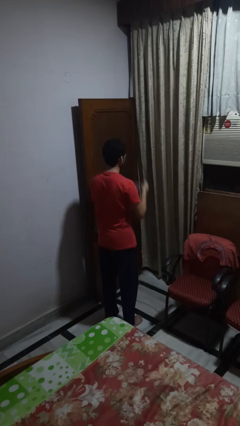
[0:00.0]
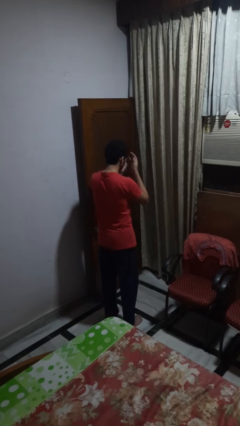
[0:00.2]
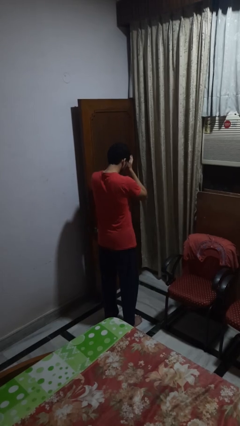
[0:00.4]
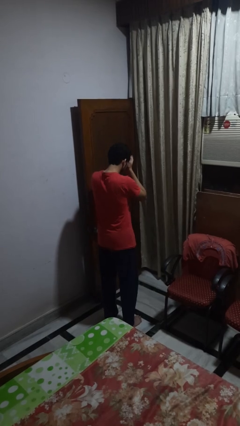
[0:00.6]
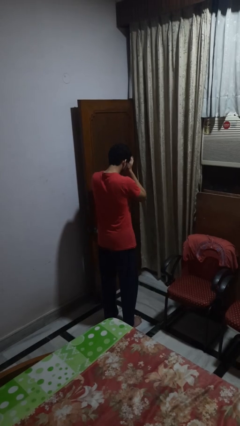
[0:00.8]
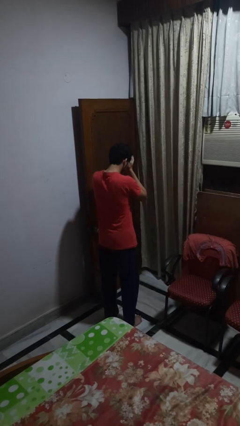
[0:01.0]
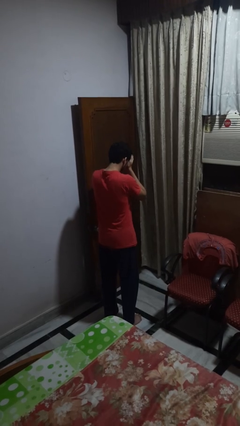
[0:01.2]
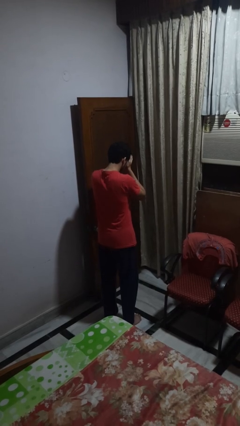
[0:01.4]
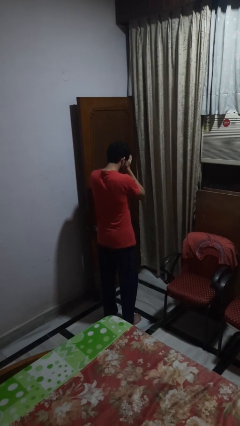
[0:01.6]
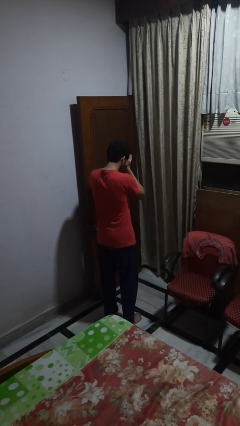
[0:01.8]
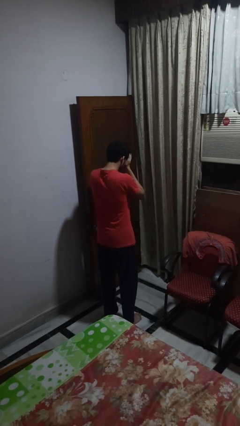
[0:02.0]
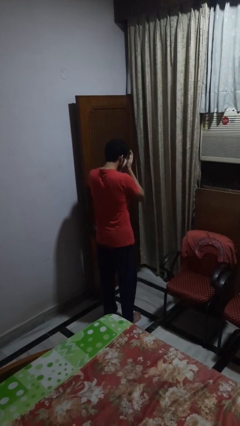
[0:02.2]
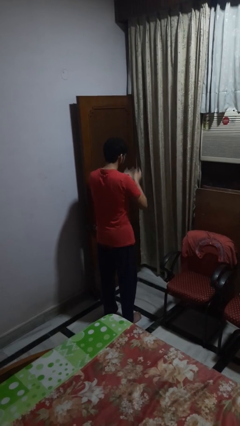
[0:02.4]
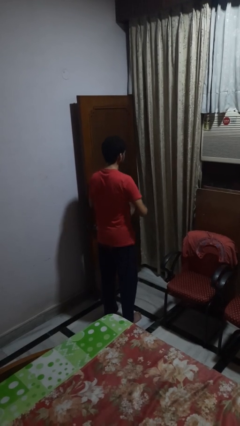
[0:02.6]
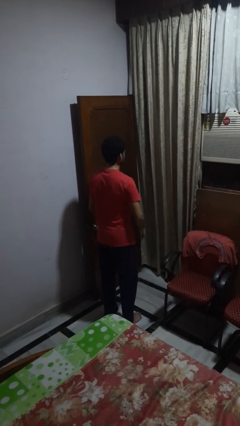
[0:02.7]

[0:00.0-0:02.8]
person covers face with hands

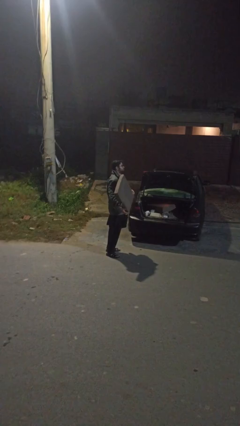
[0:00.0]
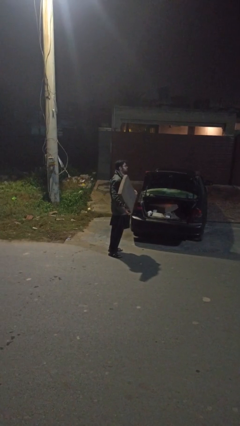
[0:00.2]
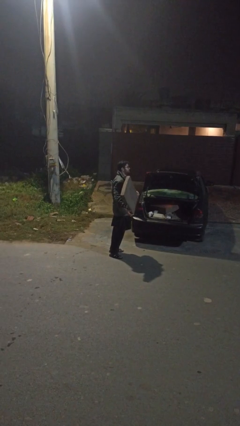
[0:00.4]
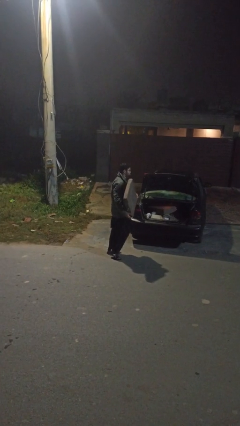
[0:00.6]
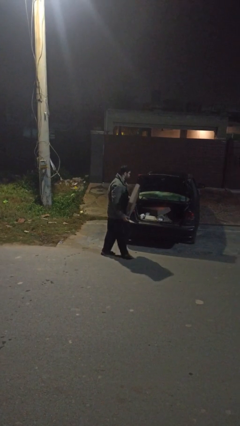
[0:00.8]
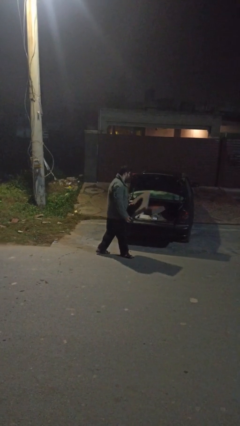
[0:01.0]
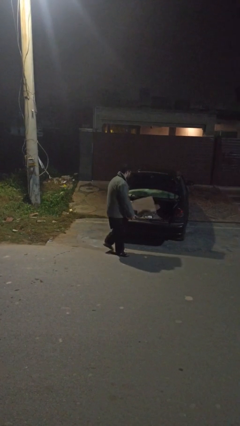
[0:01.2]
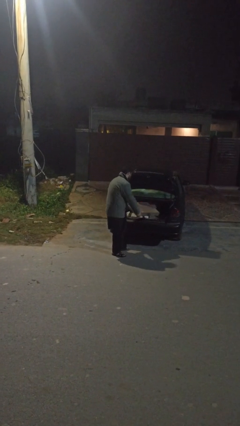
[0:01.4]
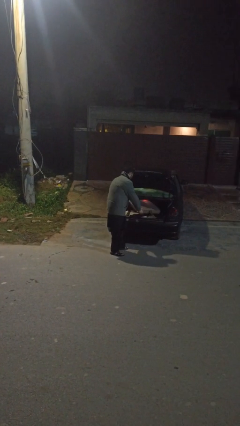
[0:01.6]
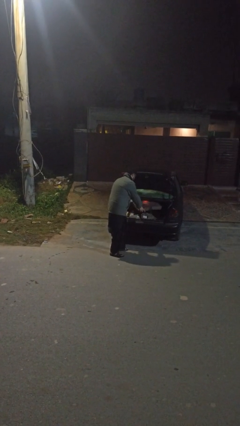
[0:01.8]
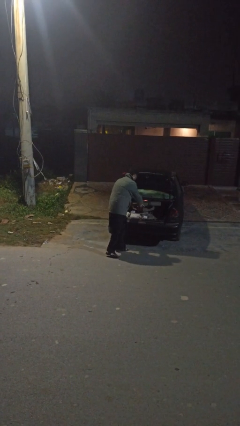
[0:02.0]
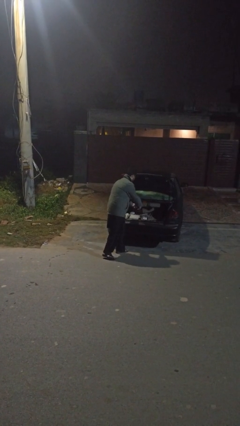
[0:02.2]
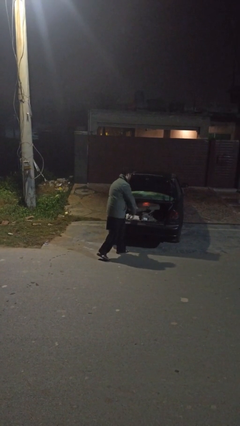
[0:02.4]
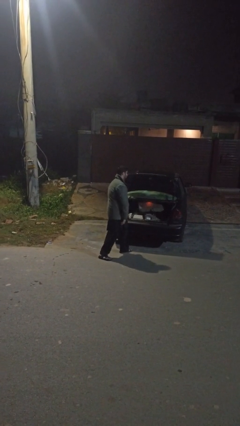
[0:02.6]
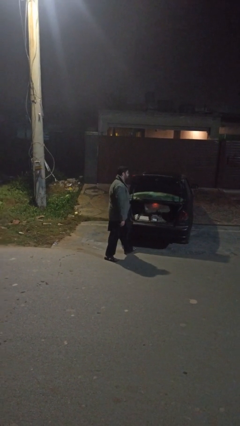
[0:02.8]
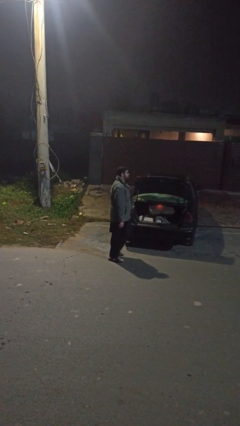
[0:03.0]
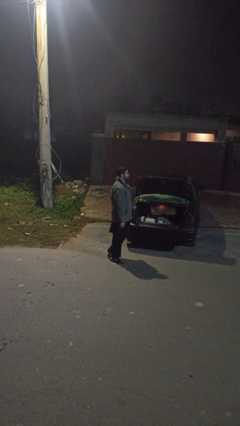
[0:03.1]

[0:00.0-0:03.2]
person loads car

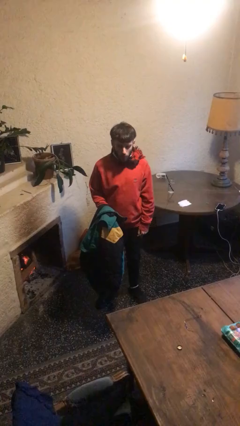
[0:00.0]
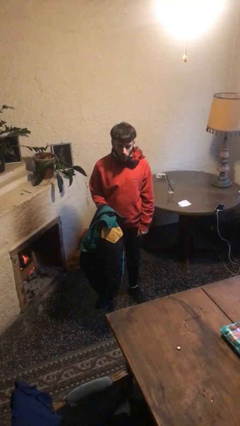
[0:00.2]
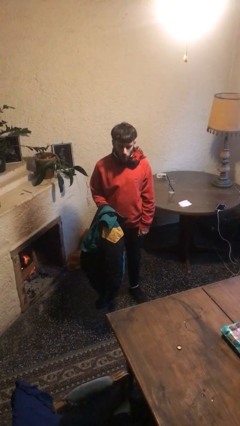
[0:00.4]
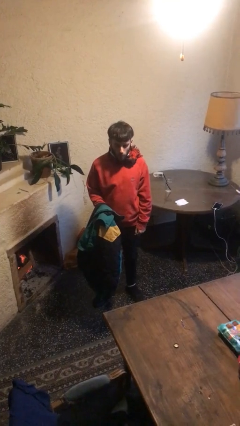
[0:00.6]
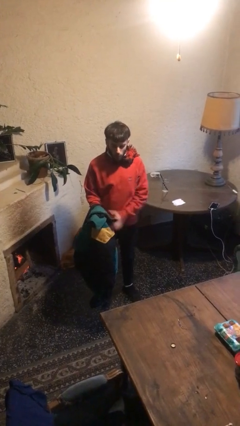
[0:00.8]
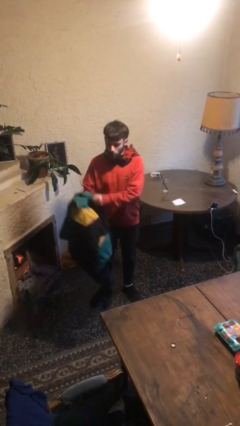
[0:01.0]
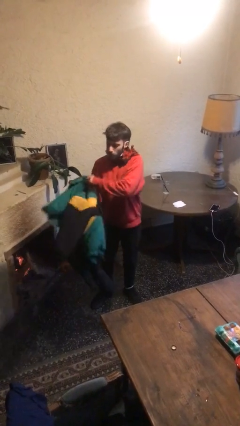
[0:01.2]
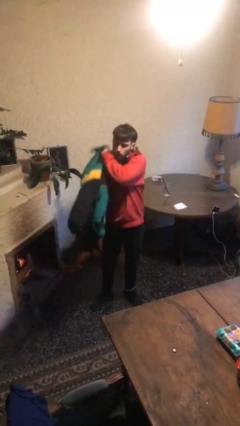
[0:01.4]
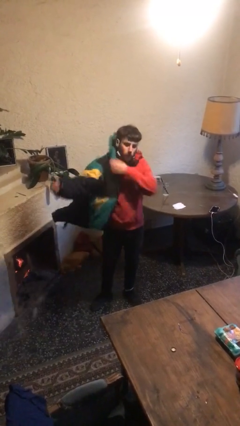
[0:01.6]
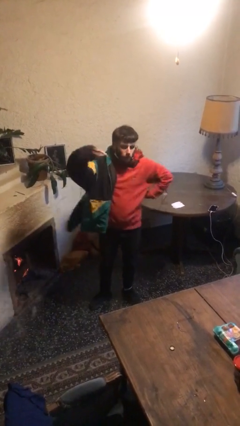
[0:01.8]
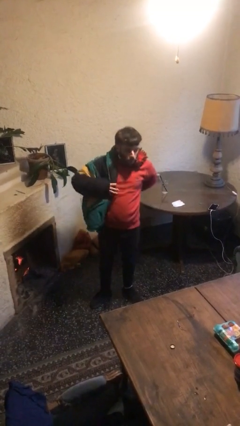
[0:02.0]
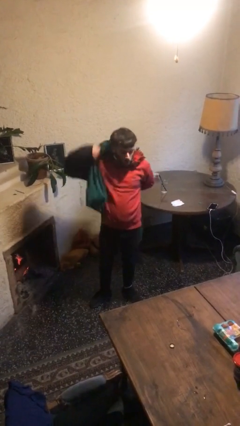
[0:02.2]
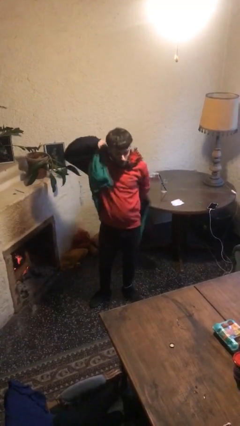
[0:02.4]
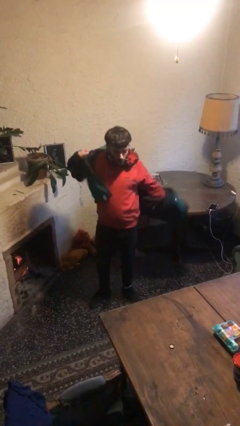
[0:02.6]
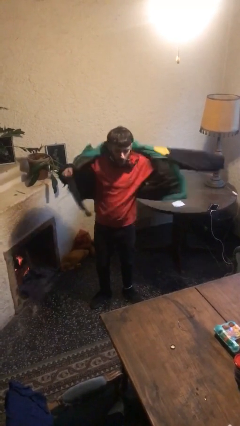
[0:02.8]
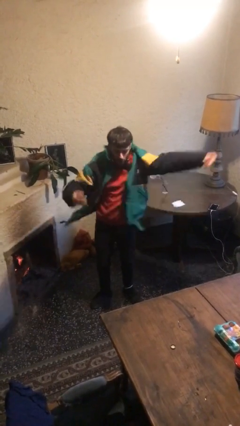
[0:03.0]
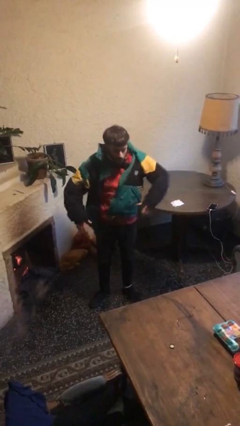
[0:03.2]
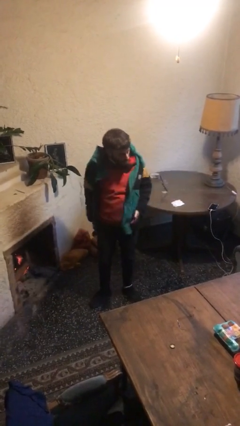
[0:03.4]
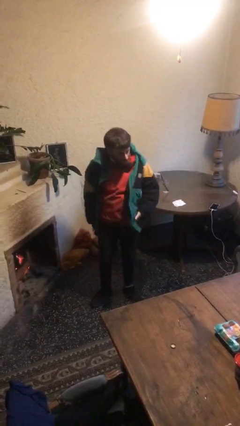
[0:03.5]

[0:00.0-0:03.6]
person puts on jacket

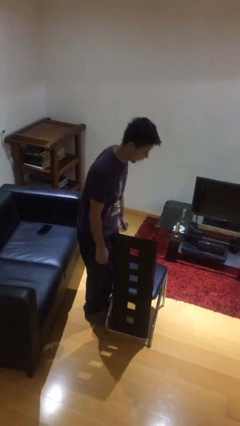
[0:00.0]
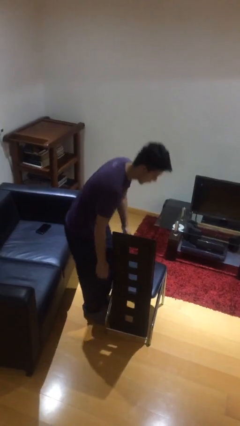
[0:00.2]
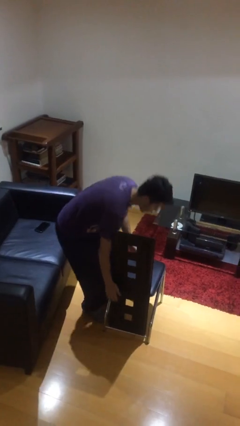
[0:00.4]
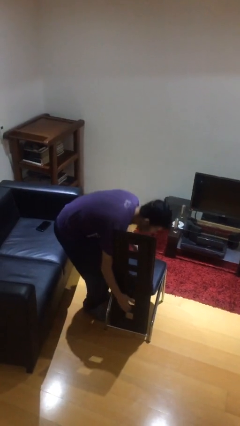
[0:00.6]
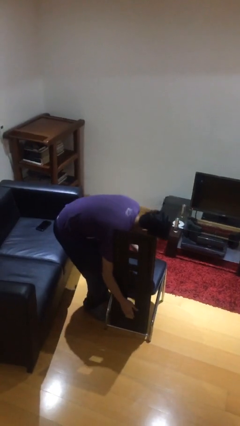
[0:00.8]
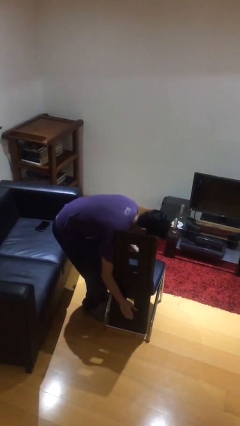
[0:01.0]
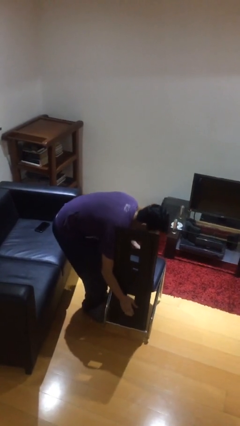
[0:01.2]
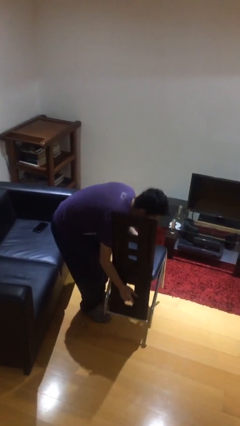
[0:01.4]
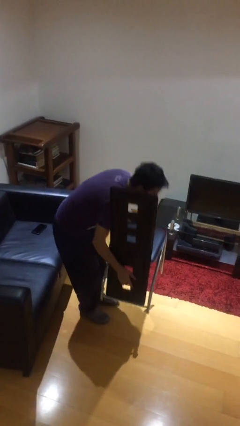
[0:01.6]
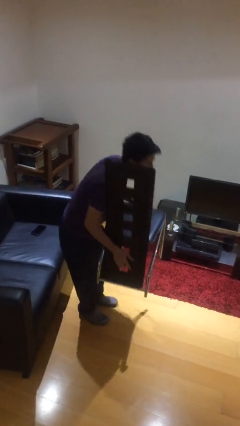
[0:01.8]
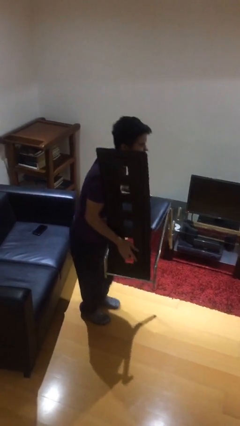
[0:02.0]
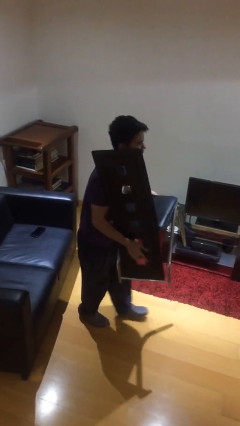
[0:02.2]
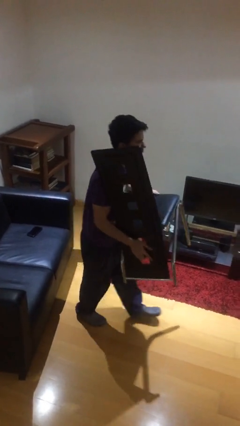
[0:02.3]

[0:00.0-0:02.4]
person picks up object from floor

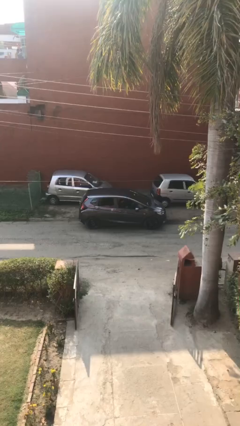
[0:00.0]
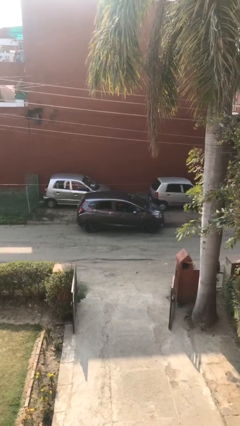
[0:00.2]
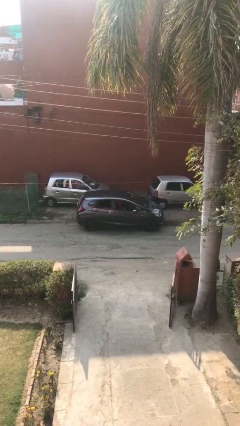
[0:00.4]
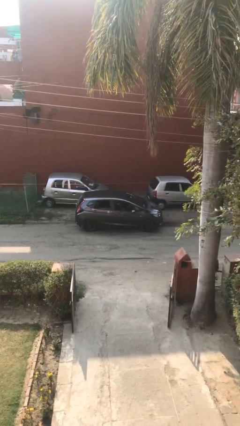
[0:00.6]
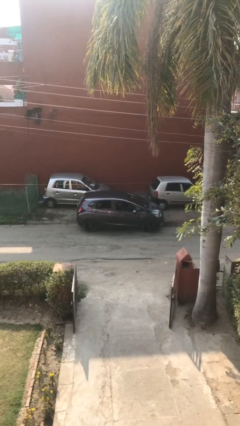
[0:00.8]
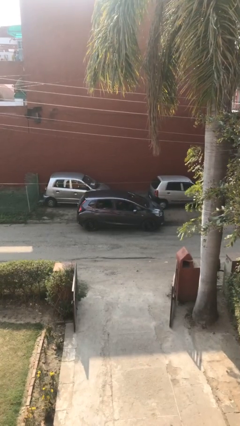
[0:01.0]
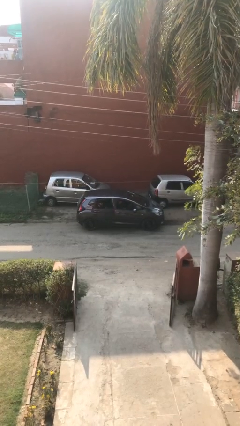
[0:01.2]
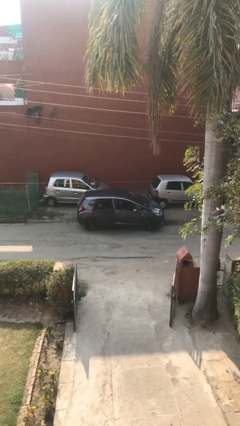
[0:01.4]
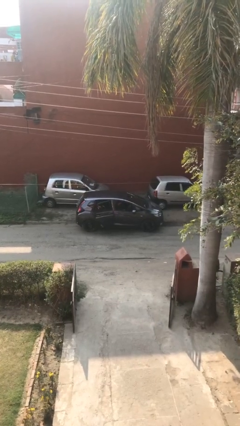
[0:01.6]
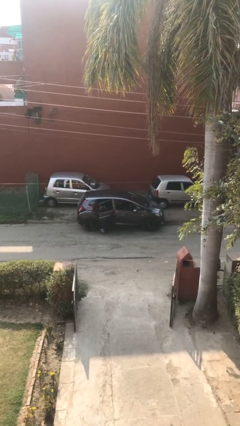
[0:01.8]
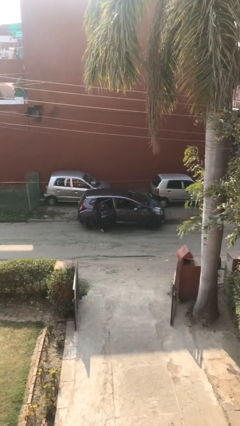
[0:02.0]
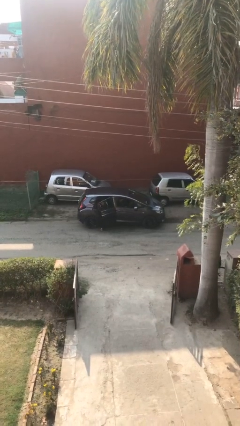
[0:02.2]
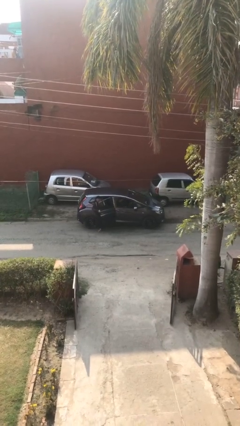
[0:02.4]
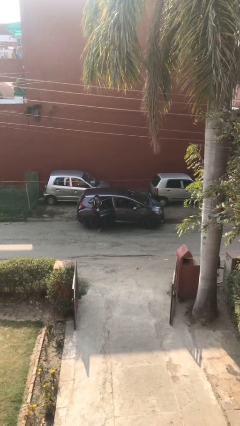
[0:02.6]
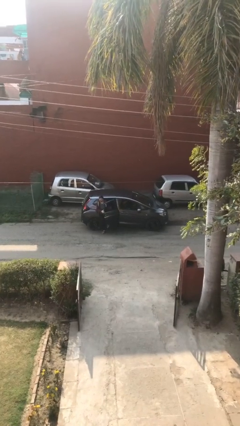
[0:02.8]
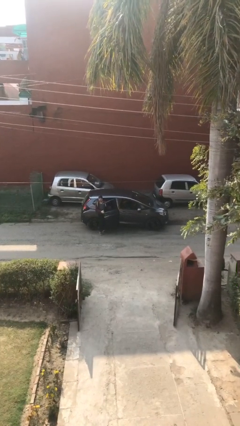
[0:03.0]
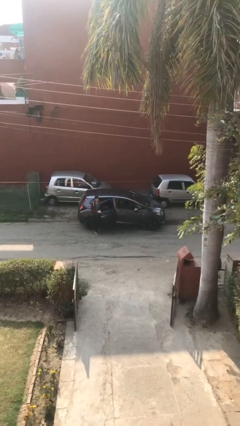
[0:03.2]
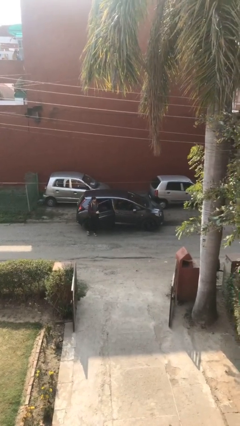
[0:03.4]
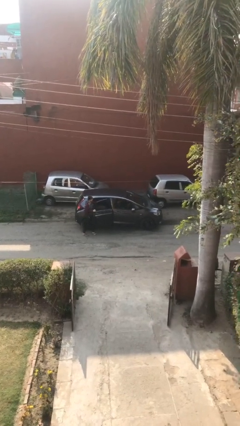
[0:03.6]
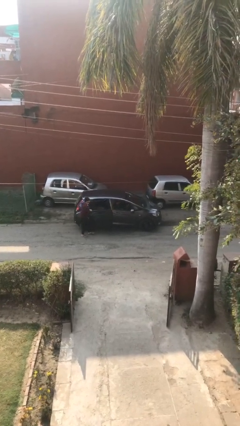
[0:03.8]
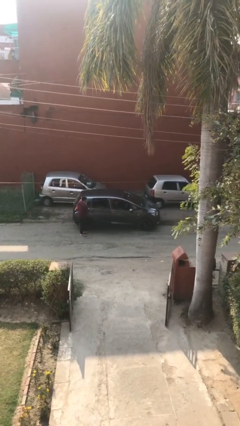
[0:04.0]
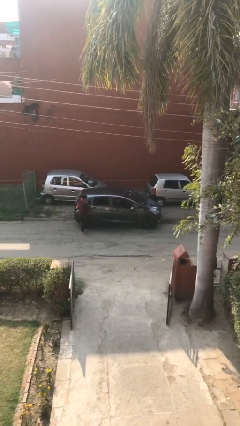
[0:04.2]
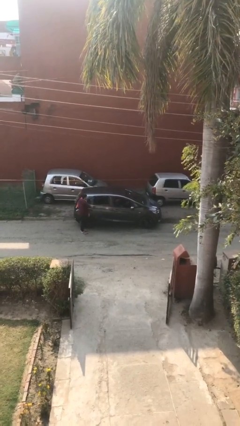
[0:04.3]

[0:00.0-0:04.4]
car drops off person

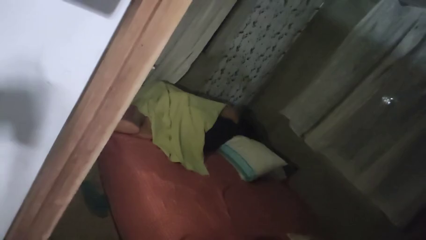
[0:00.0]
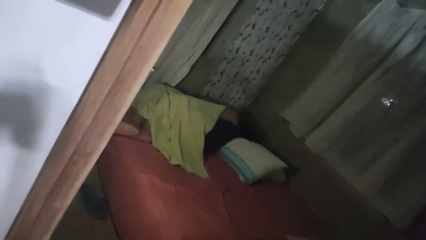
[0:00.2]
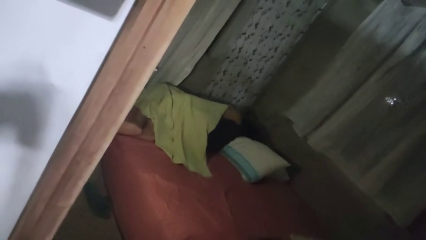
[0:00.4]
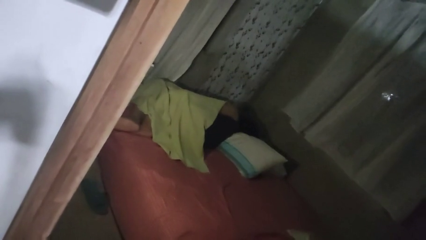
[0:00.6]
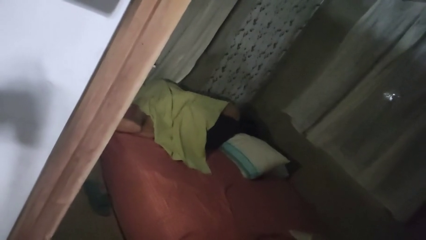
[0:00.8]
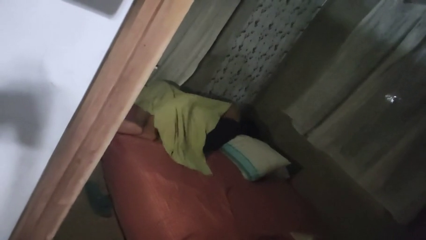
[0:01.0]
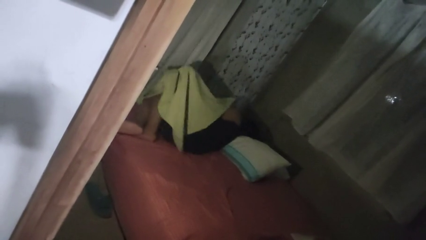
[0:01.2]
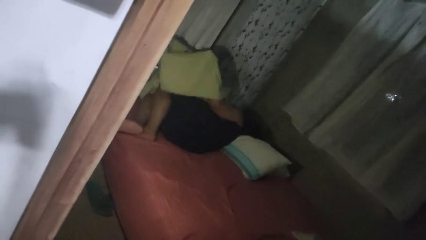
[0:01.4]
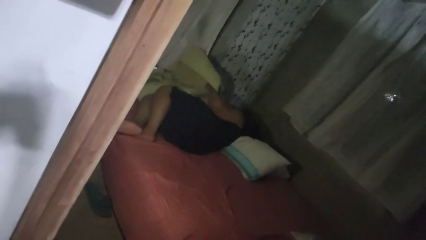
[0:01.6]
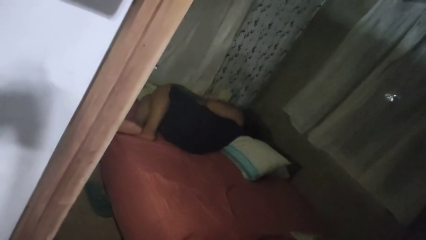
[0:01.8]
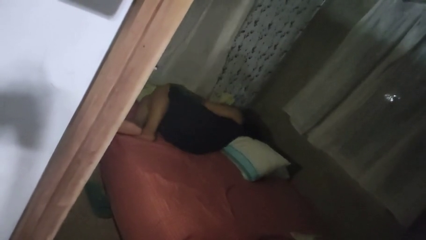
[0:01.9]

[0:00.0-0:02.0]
person uncovers with bedsheets
